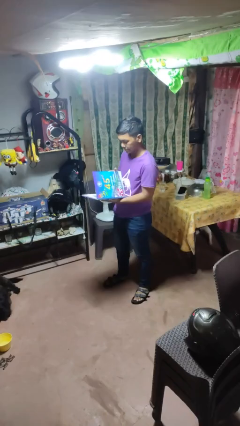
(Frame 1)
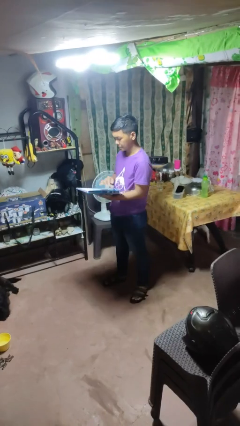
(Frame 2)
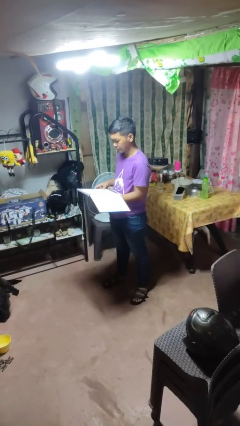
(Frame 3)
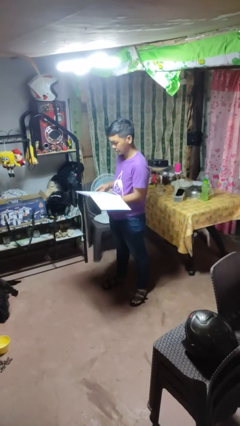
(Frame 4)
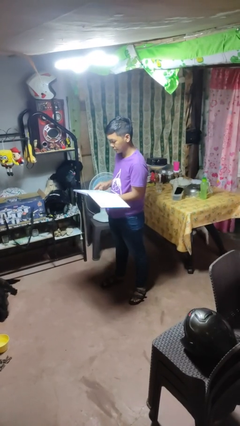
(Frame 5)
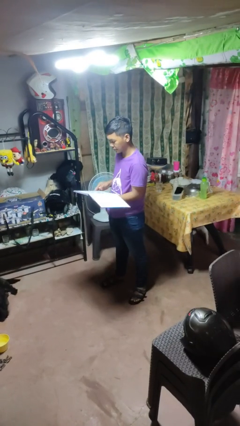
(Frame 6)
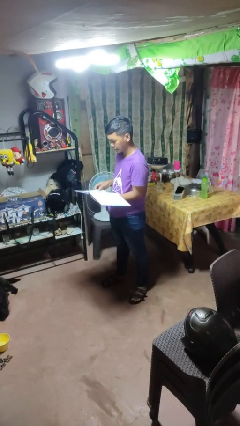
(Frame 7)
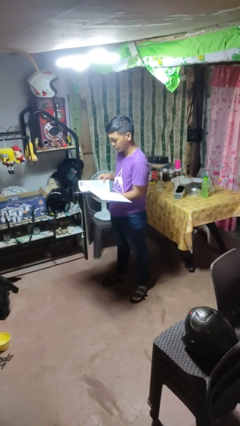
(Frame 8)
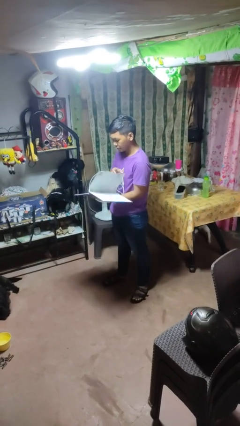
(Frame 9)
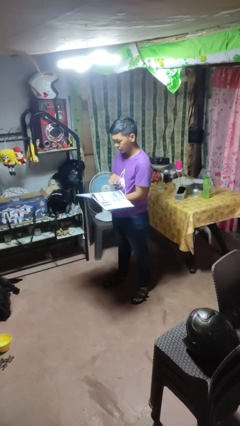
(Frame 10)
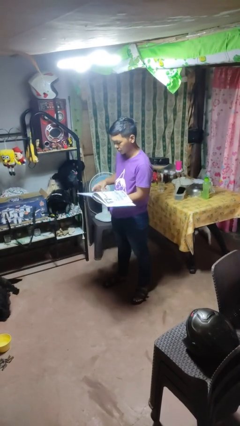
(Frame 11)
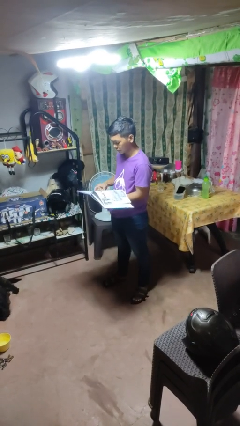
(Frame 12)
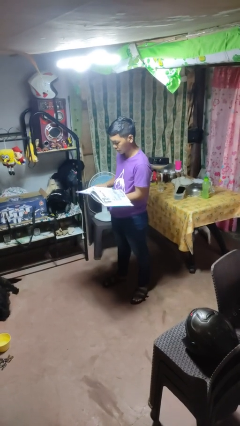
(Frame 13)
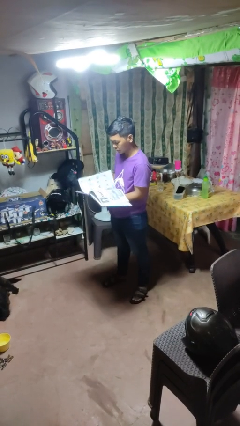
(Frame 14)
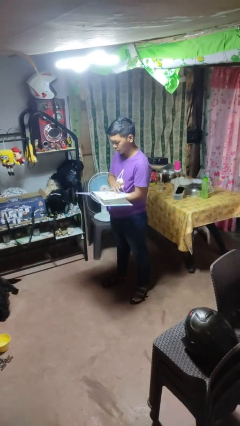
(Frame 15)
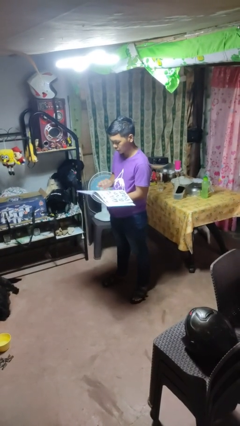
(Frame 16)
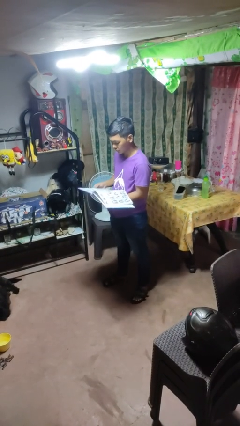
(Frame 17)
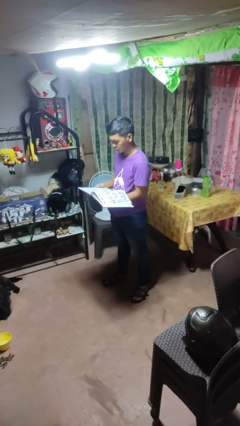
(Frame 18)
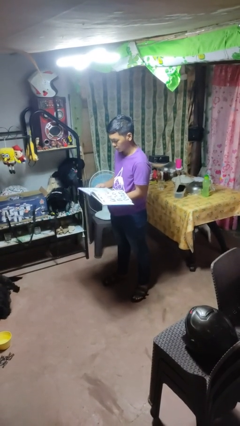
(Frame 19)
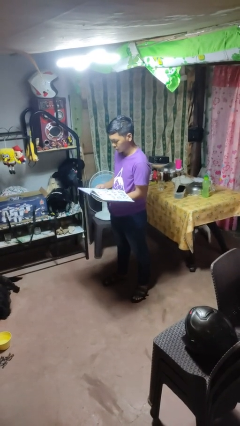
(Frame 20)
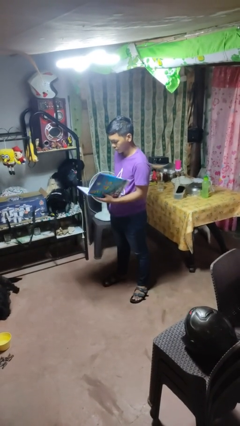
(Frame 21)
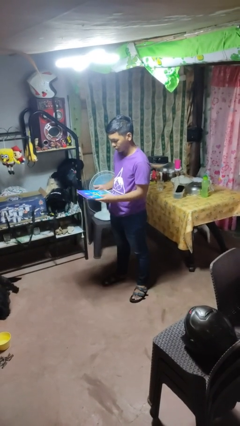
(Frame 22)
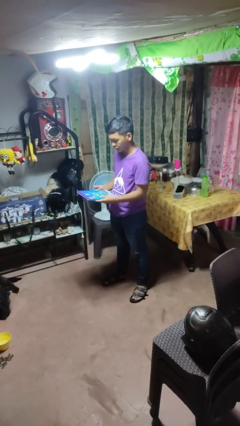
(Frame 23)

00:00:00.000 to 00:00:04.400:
person reads magazine

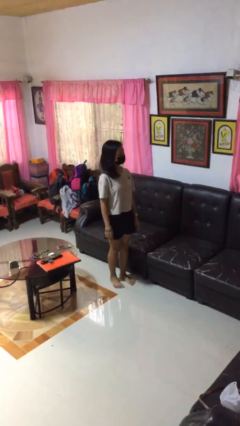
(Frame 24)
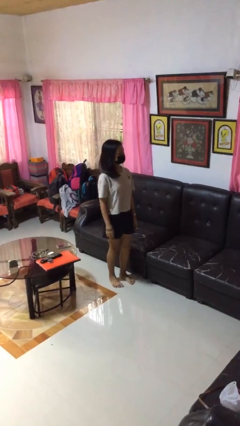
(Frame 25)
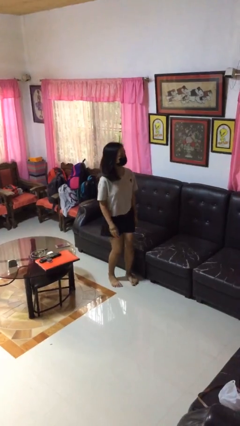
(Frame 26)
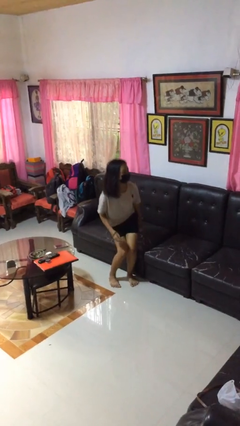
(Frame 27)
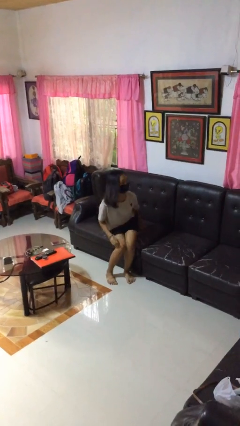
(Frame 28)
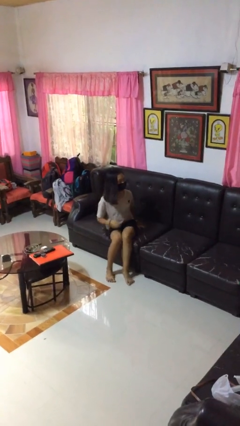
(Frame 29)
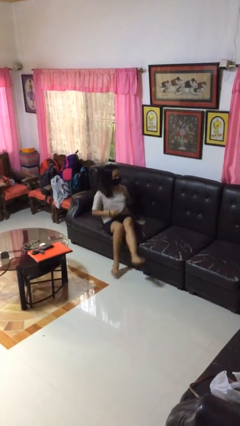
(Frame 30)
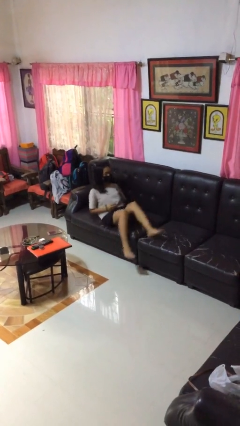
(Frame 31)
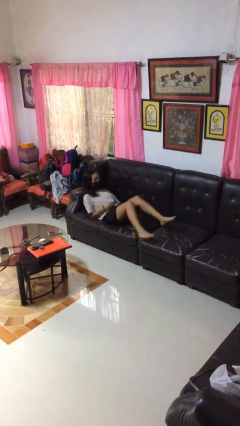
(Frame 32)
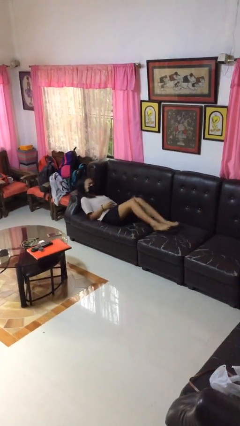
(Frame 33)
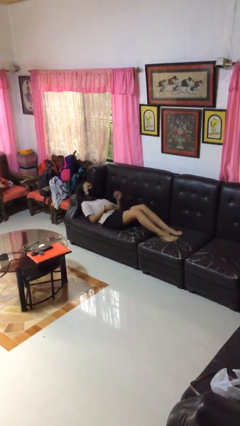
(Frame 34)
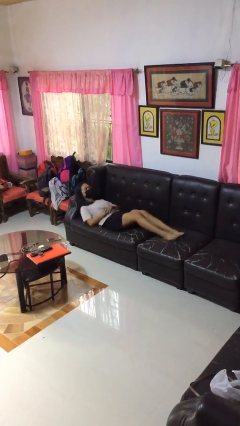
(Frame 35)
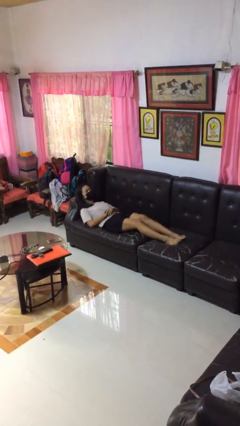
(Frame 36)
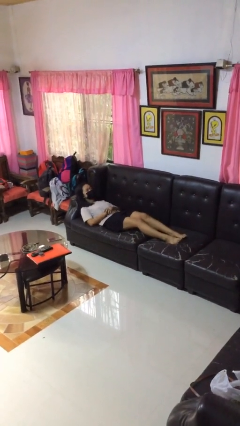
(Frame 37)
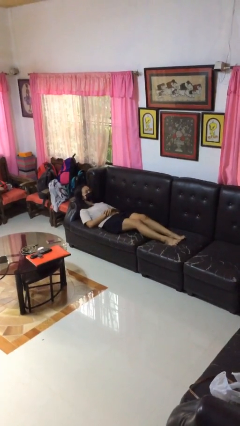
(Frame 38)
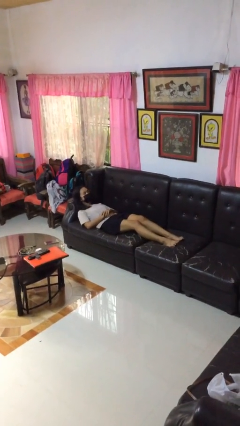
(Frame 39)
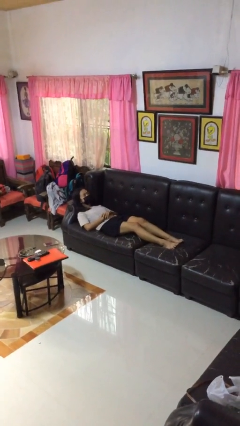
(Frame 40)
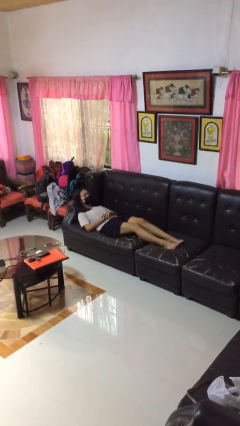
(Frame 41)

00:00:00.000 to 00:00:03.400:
person lies down on couch

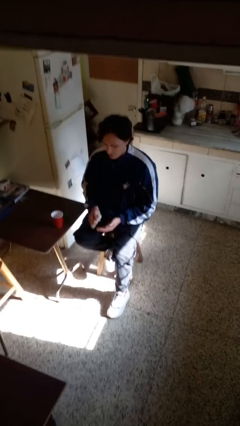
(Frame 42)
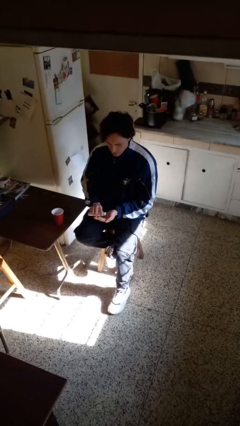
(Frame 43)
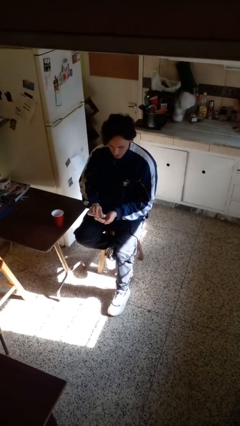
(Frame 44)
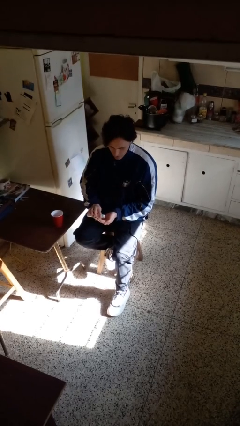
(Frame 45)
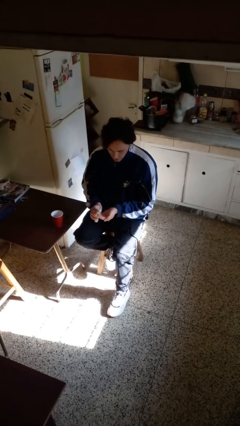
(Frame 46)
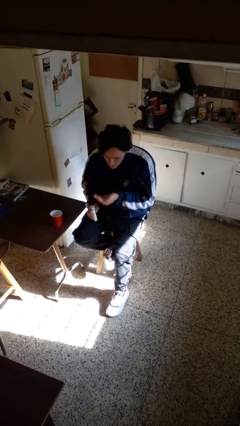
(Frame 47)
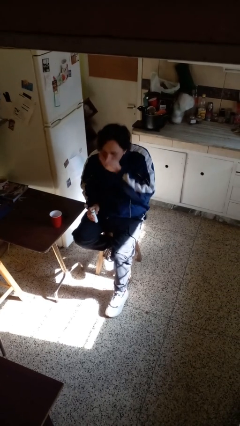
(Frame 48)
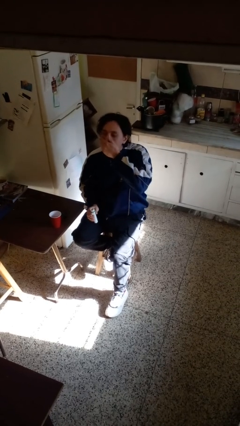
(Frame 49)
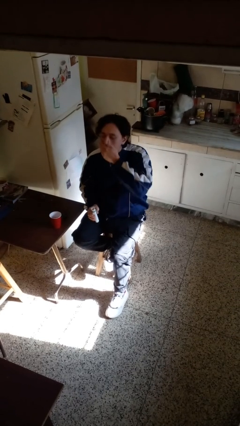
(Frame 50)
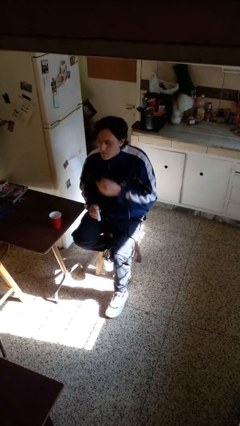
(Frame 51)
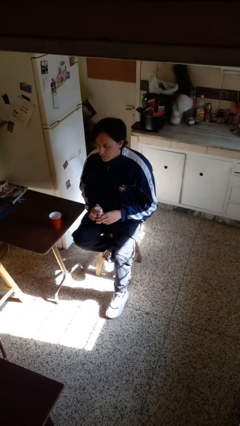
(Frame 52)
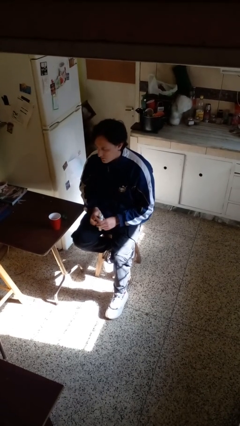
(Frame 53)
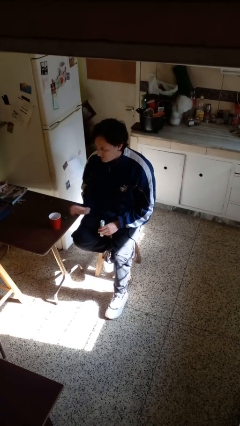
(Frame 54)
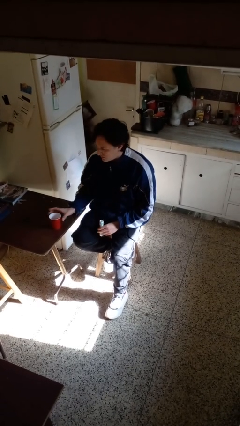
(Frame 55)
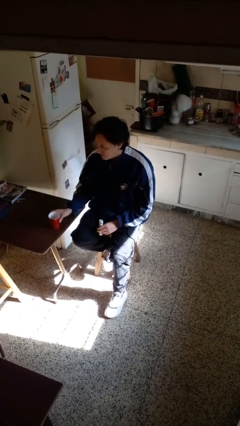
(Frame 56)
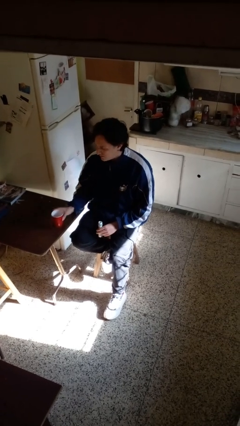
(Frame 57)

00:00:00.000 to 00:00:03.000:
person takes medicine pills

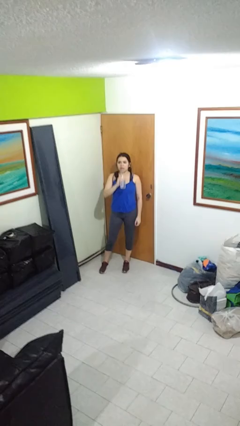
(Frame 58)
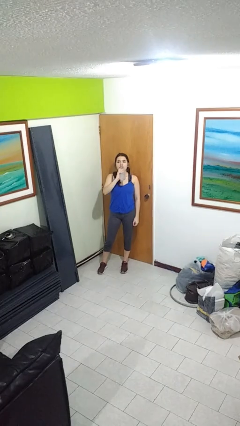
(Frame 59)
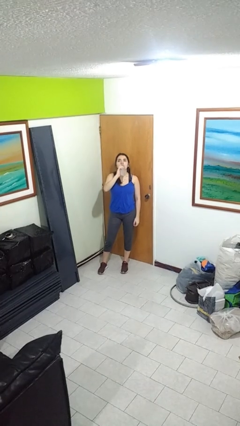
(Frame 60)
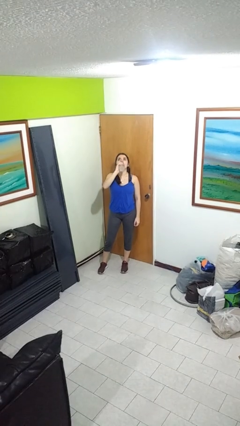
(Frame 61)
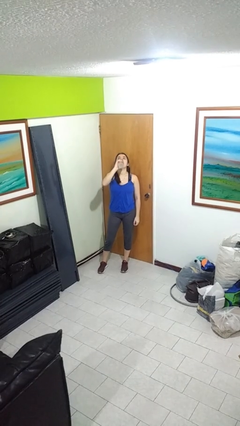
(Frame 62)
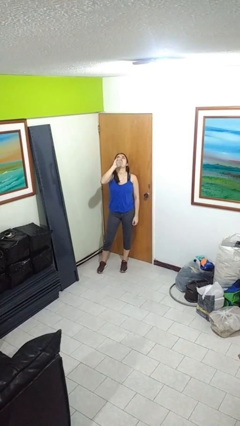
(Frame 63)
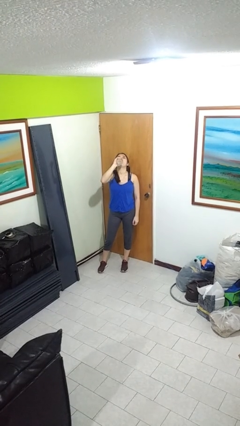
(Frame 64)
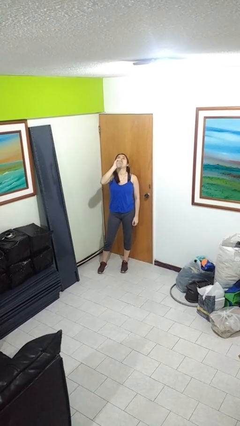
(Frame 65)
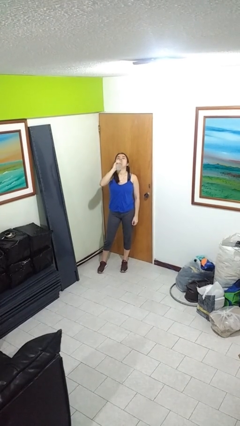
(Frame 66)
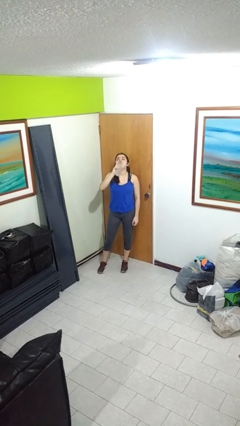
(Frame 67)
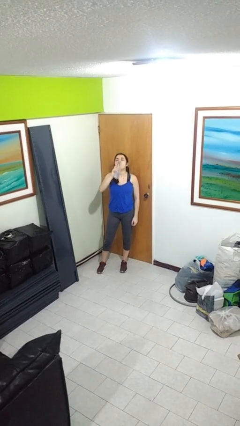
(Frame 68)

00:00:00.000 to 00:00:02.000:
person drinks from bottle

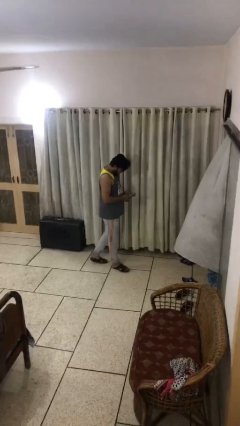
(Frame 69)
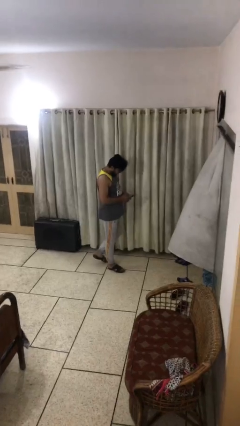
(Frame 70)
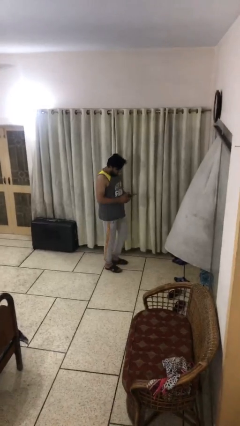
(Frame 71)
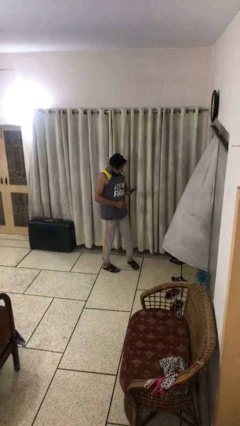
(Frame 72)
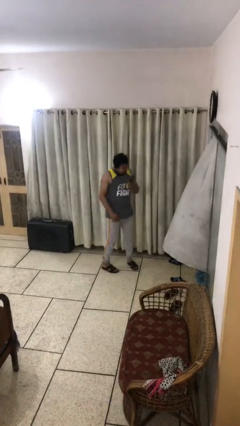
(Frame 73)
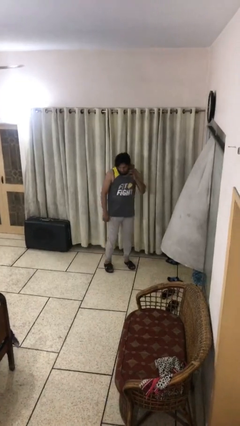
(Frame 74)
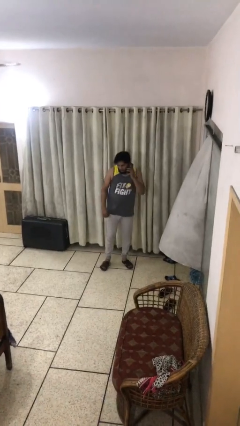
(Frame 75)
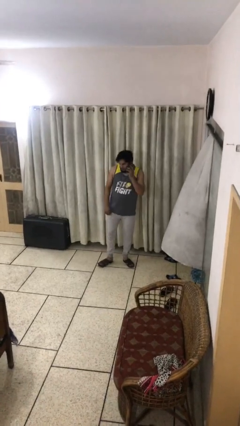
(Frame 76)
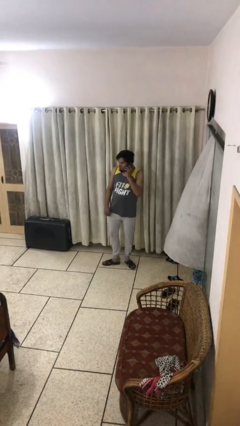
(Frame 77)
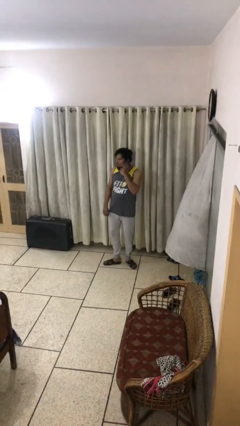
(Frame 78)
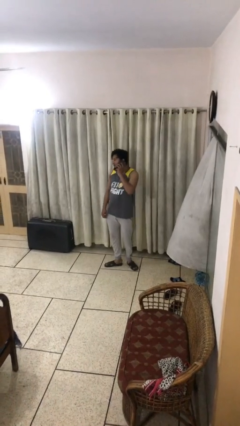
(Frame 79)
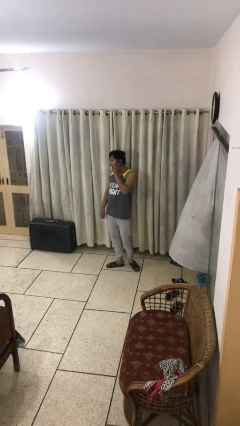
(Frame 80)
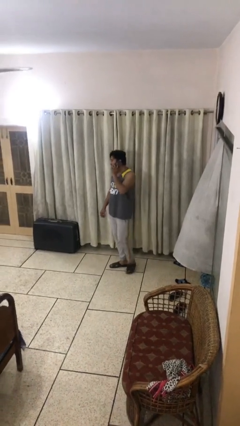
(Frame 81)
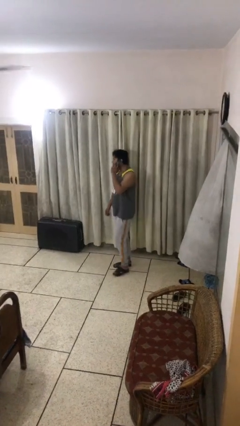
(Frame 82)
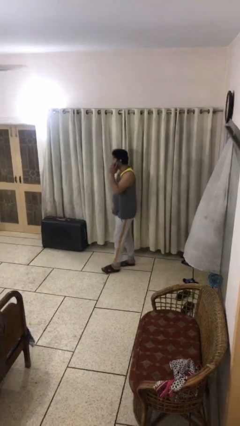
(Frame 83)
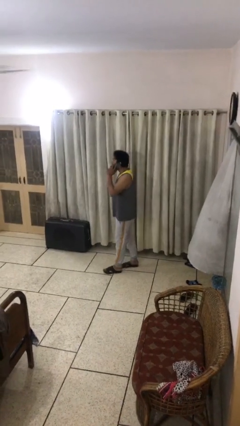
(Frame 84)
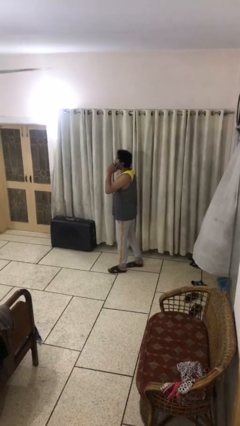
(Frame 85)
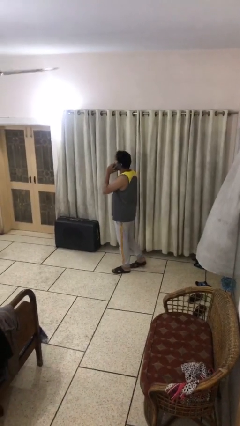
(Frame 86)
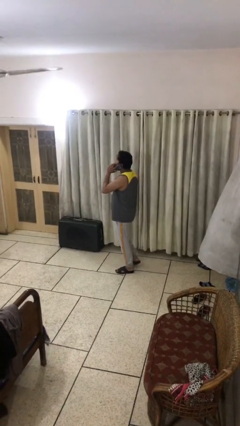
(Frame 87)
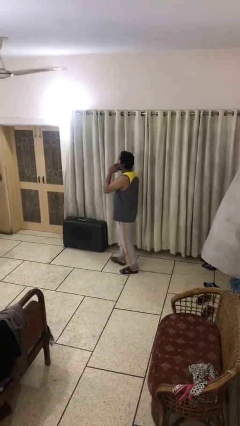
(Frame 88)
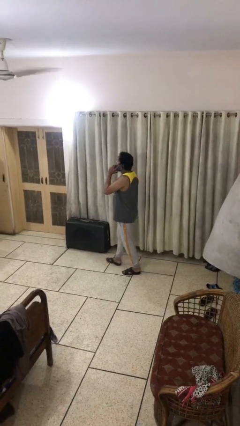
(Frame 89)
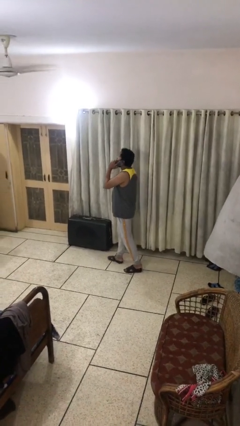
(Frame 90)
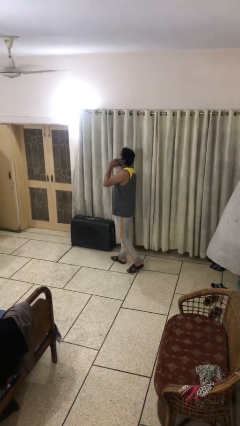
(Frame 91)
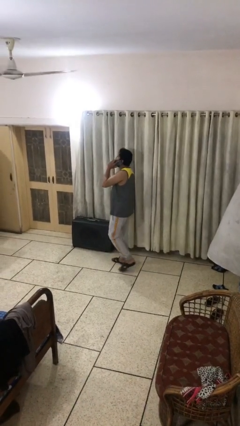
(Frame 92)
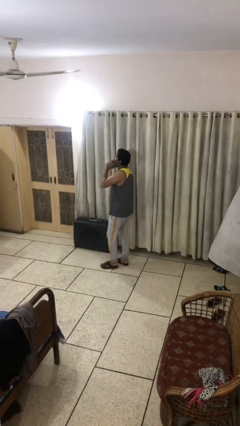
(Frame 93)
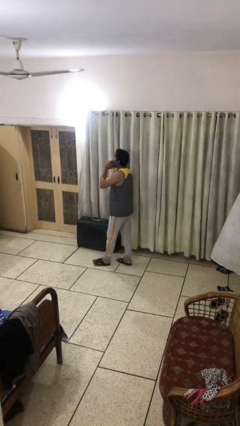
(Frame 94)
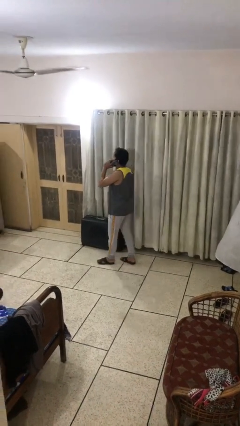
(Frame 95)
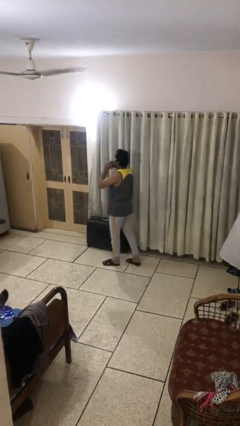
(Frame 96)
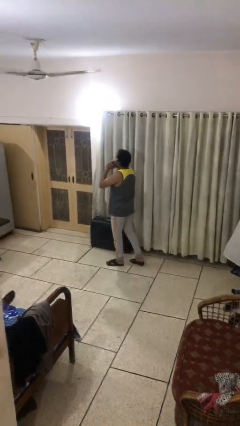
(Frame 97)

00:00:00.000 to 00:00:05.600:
person talks on phone
